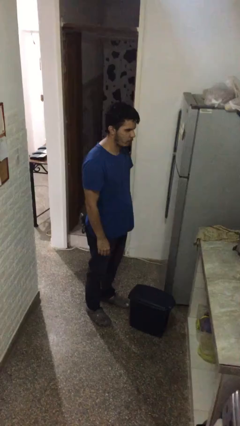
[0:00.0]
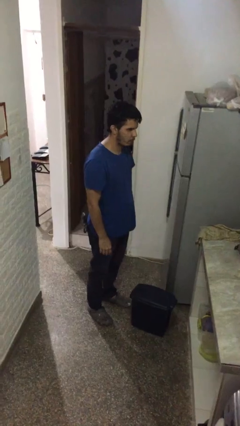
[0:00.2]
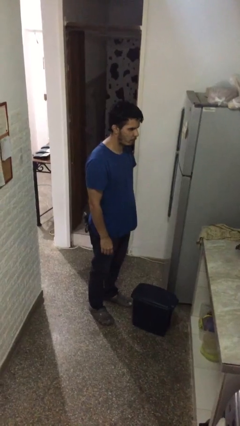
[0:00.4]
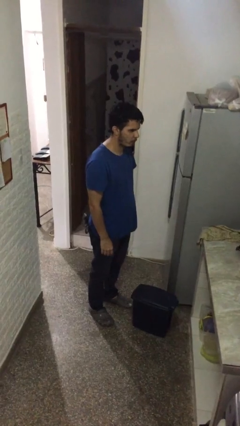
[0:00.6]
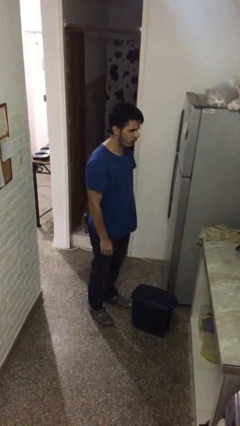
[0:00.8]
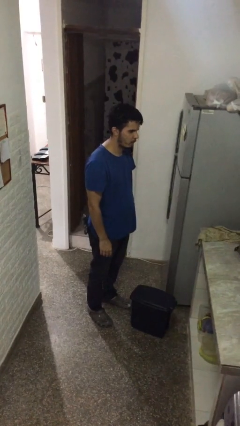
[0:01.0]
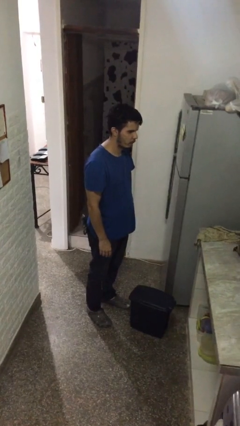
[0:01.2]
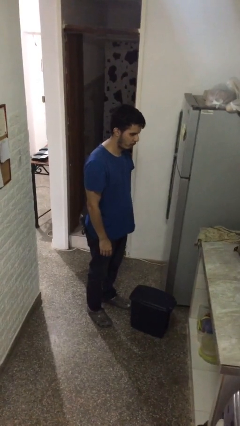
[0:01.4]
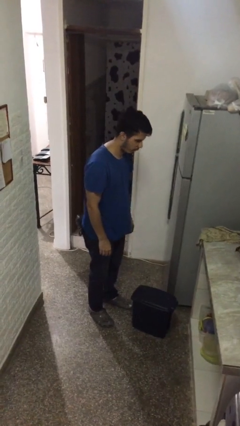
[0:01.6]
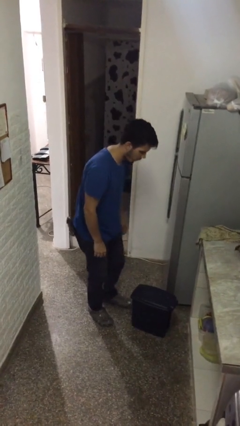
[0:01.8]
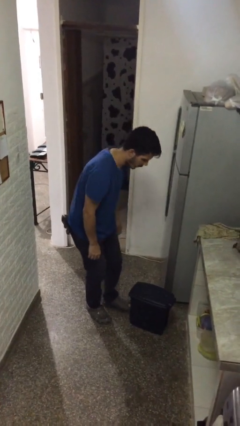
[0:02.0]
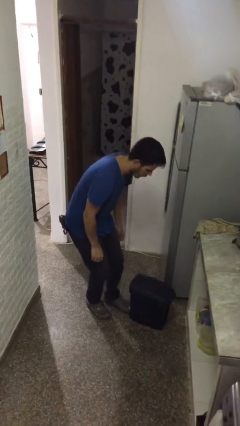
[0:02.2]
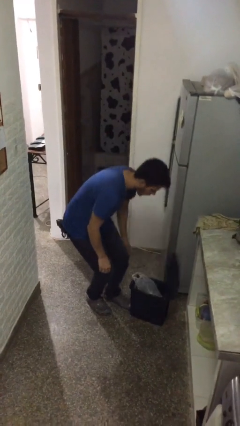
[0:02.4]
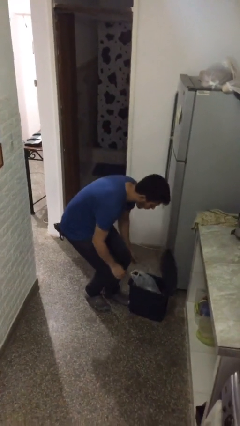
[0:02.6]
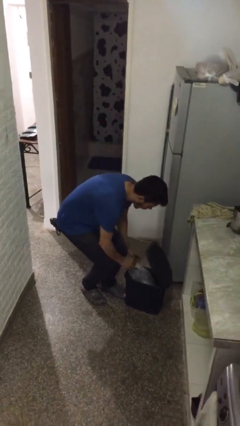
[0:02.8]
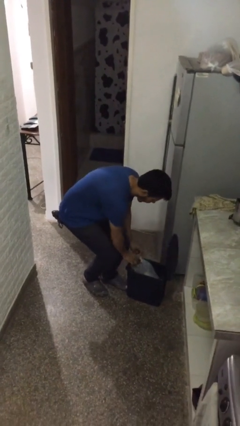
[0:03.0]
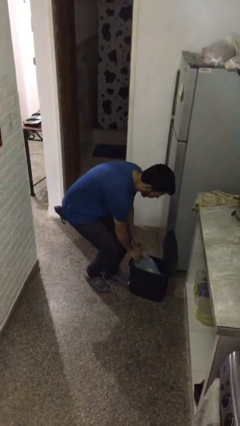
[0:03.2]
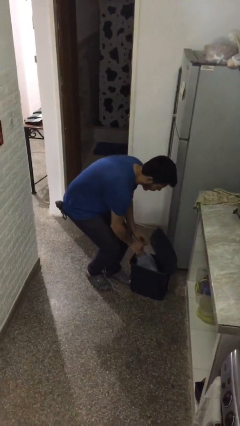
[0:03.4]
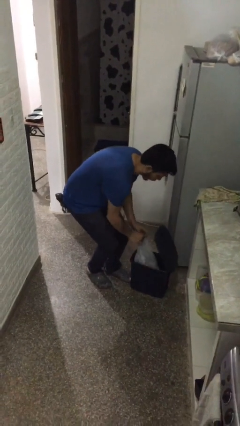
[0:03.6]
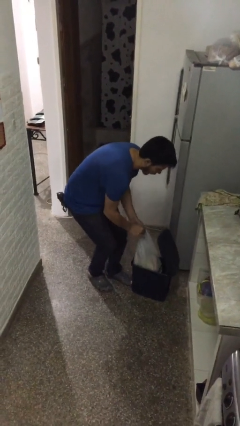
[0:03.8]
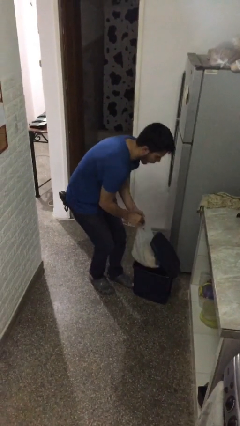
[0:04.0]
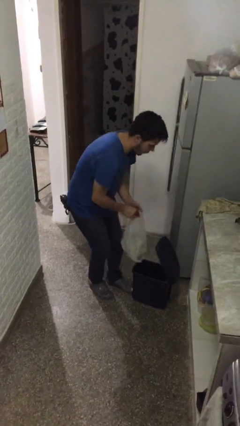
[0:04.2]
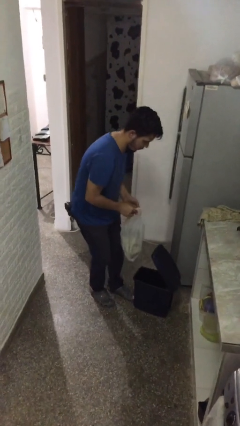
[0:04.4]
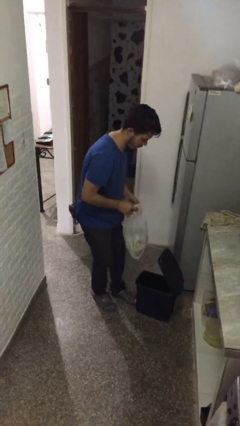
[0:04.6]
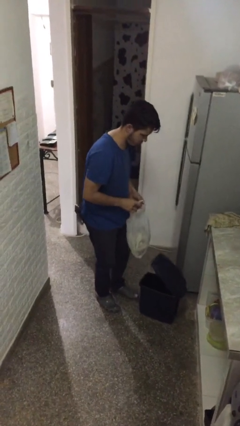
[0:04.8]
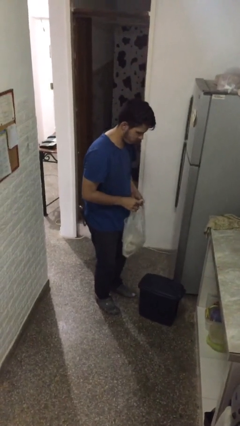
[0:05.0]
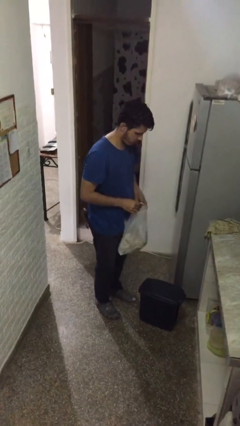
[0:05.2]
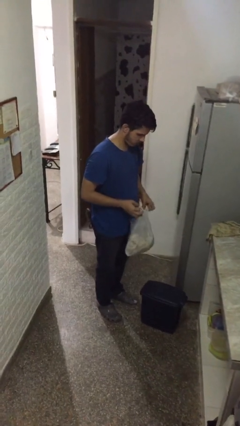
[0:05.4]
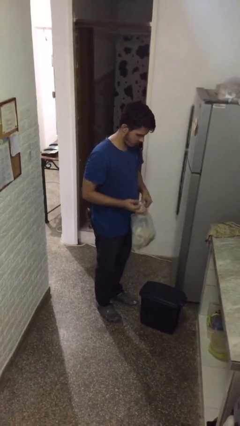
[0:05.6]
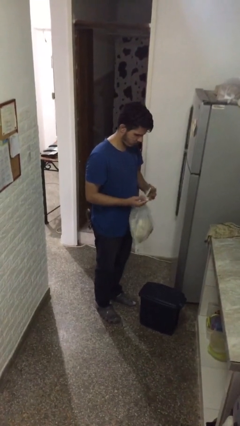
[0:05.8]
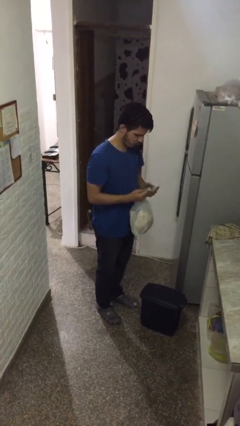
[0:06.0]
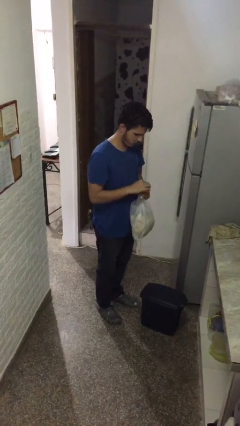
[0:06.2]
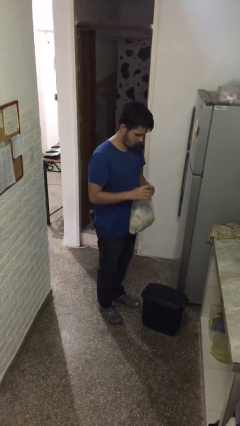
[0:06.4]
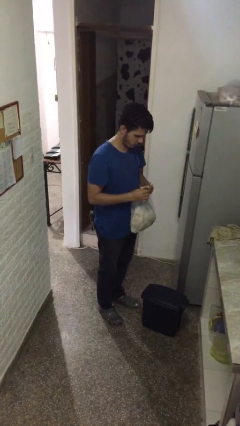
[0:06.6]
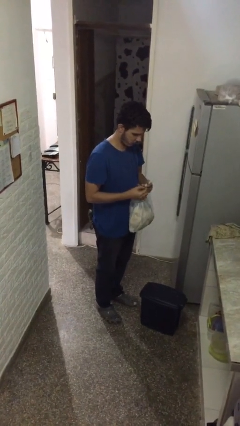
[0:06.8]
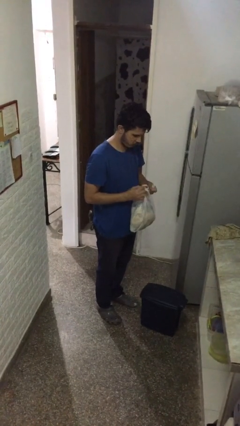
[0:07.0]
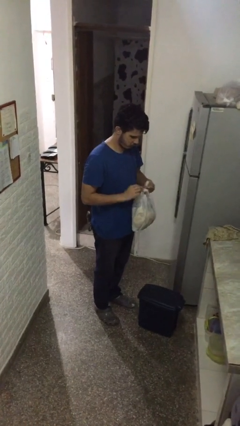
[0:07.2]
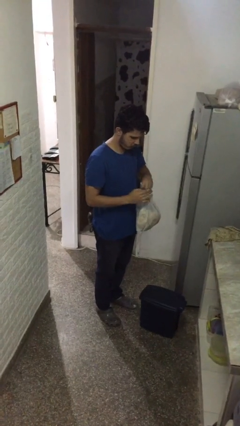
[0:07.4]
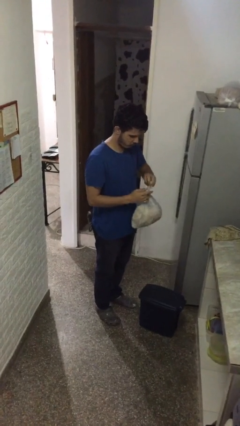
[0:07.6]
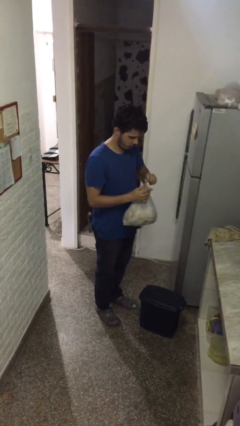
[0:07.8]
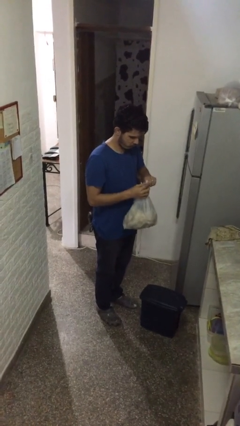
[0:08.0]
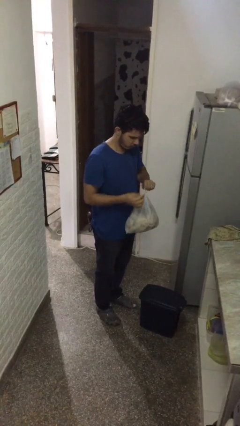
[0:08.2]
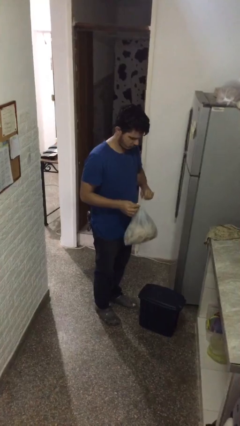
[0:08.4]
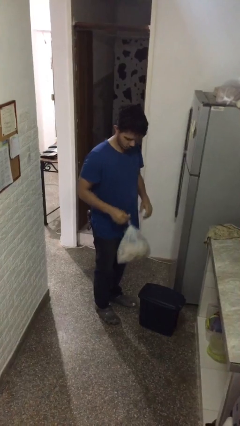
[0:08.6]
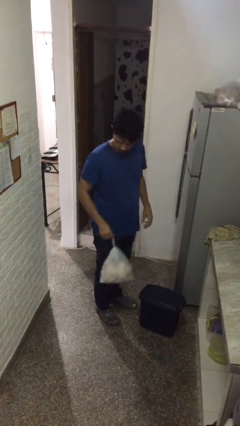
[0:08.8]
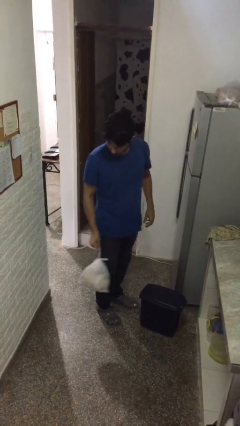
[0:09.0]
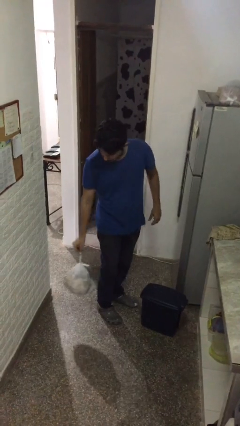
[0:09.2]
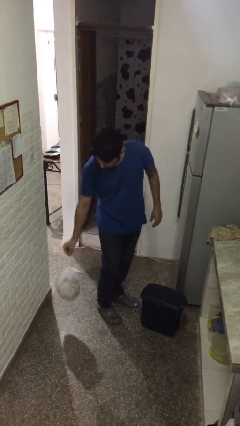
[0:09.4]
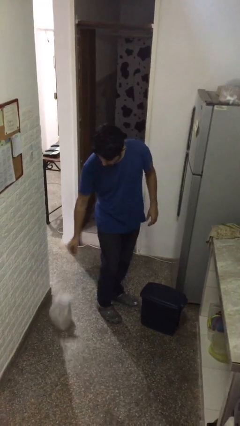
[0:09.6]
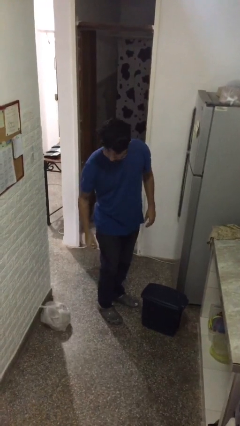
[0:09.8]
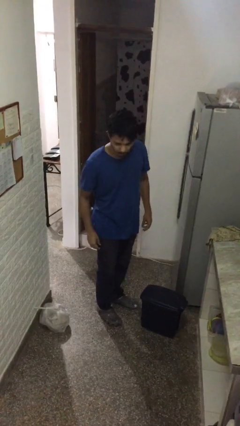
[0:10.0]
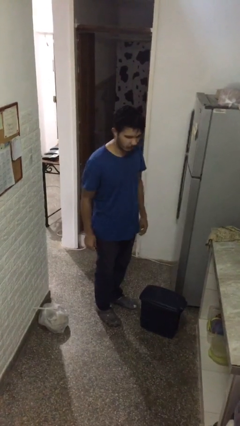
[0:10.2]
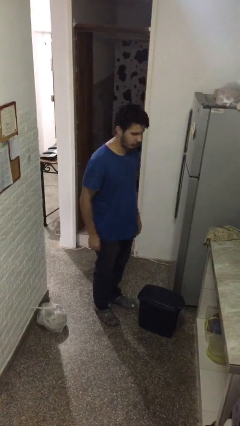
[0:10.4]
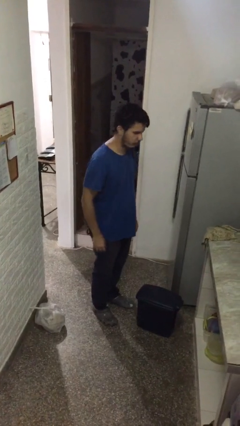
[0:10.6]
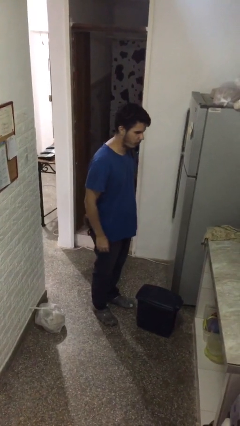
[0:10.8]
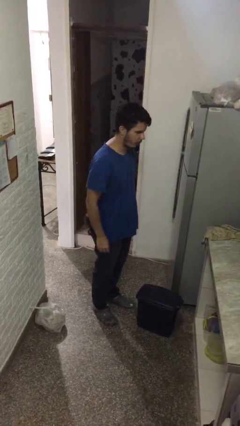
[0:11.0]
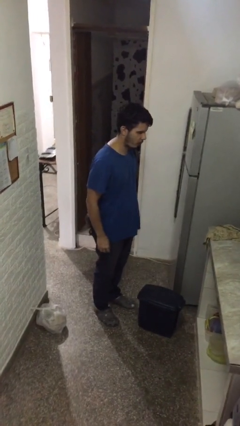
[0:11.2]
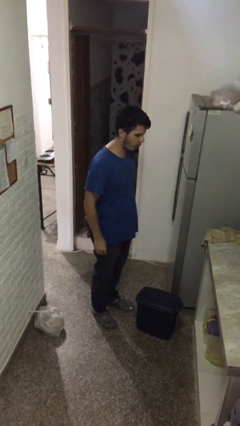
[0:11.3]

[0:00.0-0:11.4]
person removes trashbag from trashcan

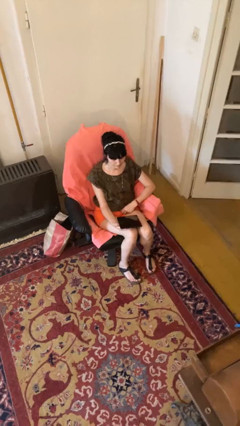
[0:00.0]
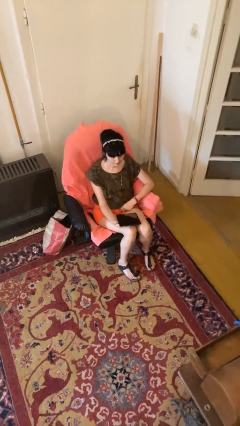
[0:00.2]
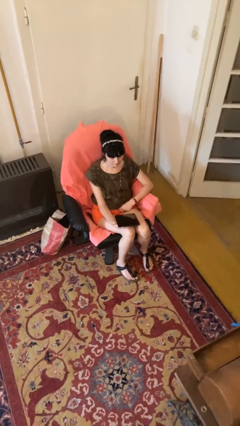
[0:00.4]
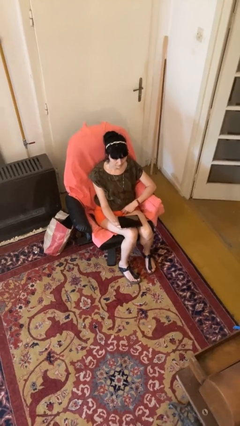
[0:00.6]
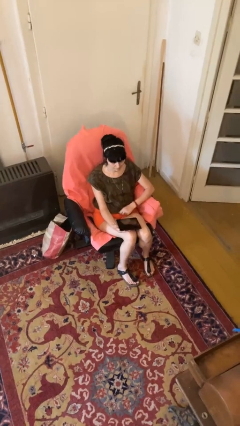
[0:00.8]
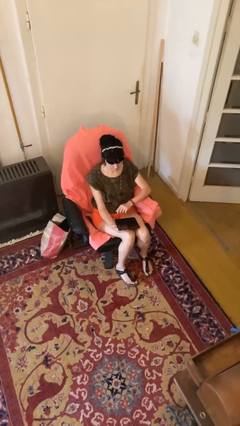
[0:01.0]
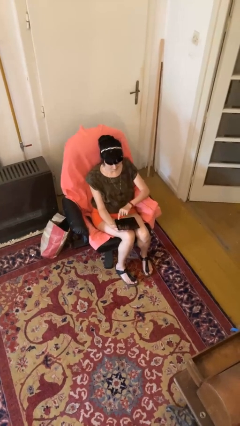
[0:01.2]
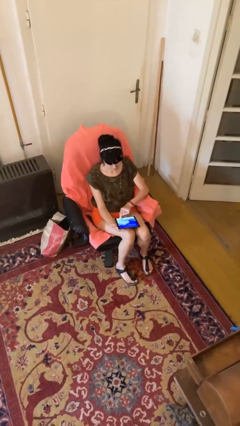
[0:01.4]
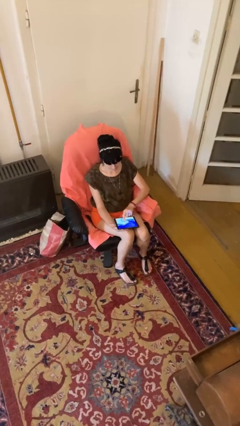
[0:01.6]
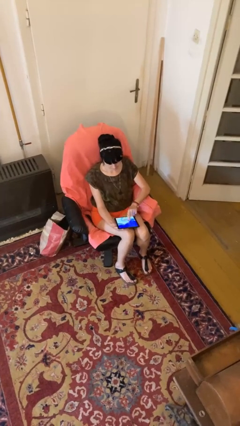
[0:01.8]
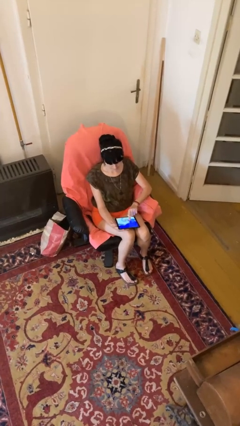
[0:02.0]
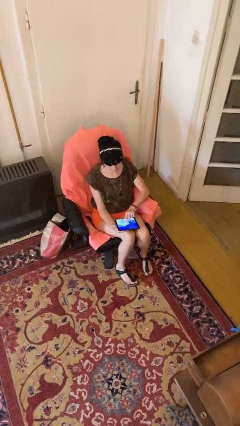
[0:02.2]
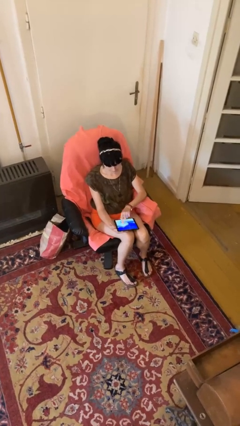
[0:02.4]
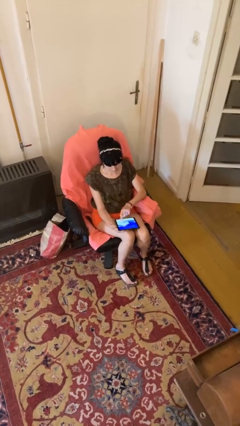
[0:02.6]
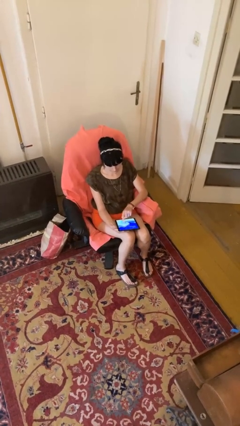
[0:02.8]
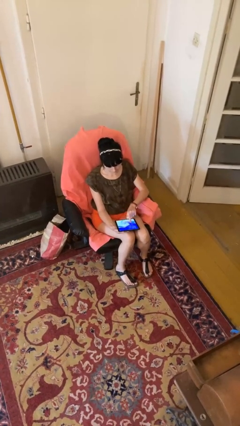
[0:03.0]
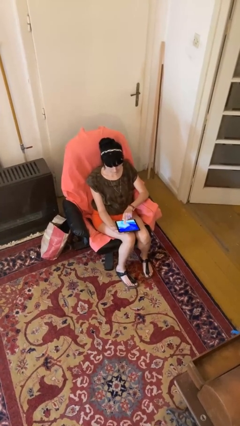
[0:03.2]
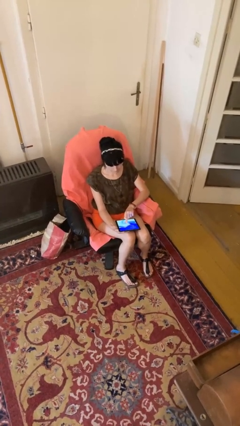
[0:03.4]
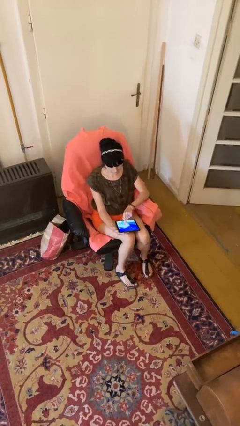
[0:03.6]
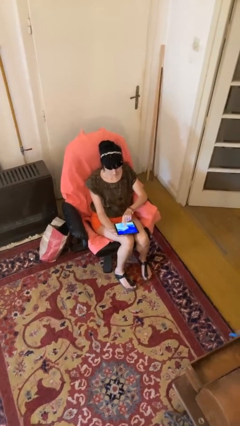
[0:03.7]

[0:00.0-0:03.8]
person interacts with tablet

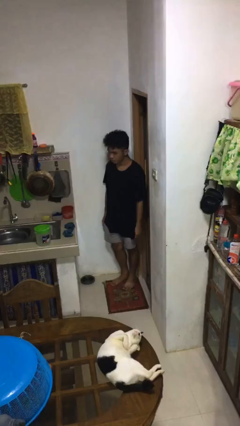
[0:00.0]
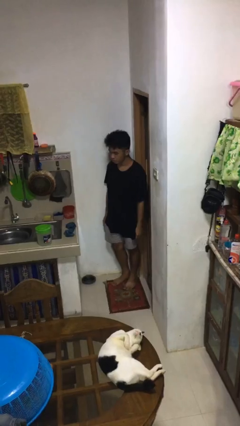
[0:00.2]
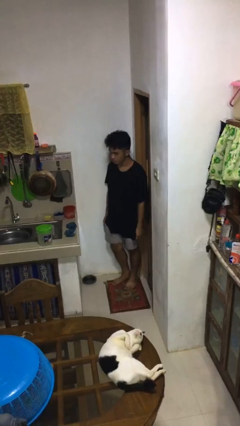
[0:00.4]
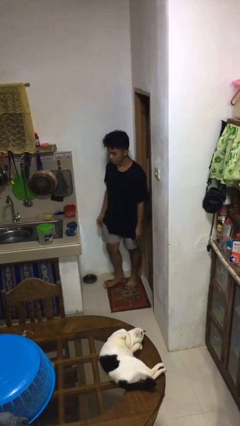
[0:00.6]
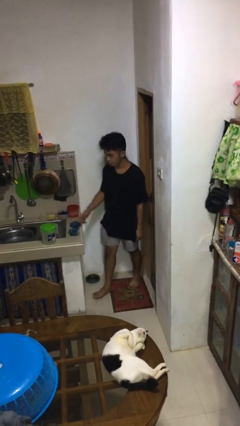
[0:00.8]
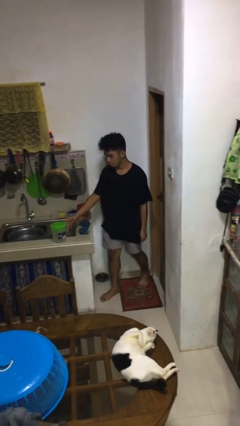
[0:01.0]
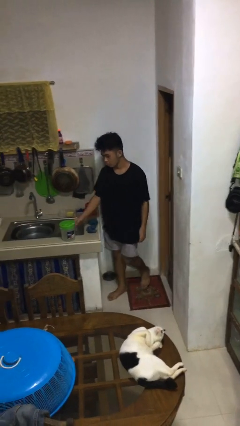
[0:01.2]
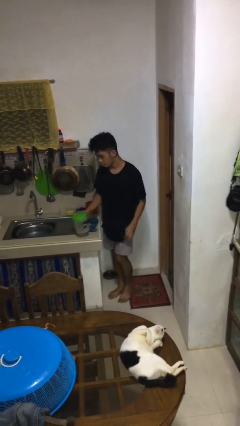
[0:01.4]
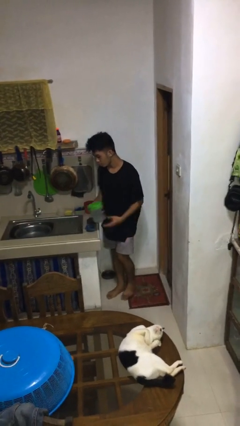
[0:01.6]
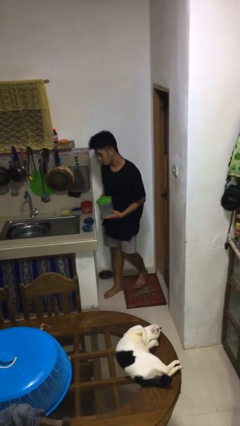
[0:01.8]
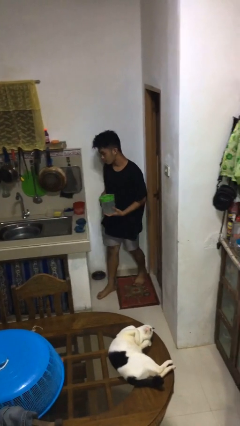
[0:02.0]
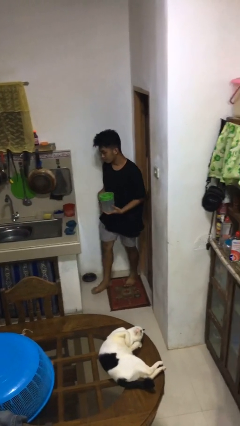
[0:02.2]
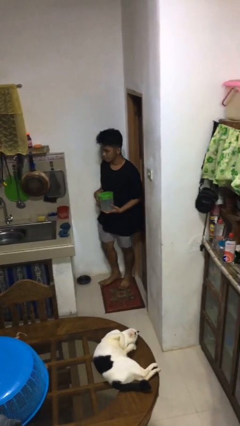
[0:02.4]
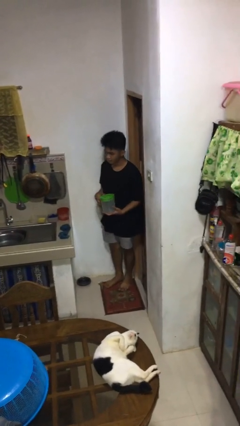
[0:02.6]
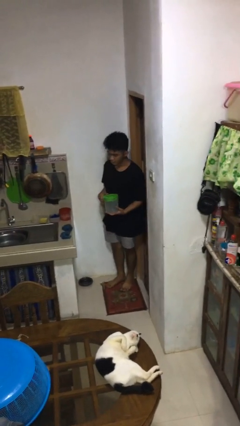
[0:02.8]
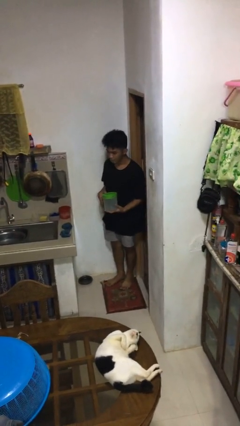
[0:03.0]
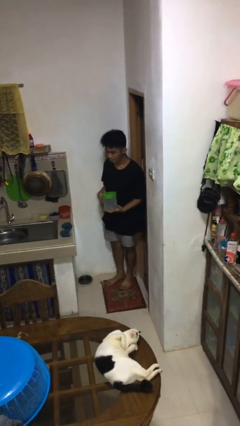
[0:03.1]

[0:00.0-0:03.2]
person picks up object from countertop
